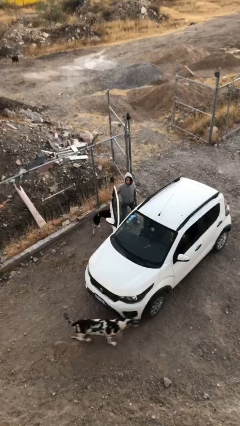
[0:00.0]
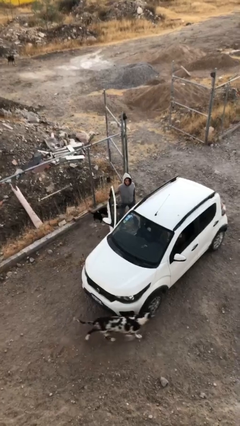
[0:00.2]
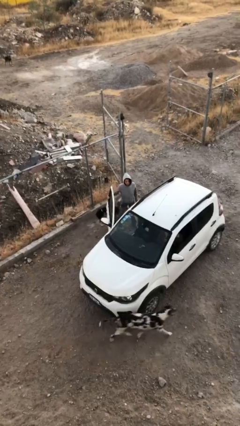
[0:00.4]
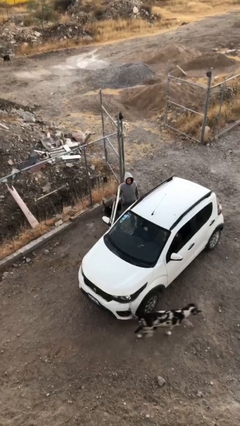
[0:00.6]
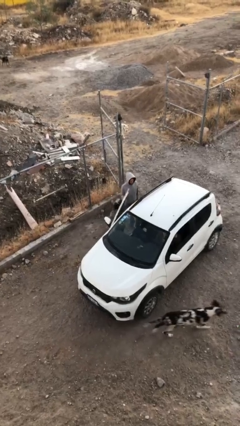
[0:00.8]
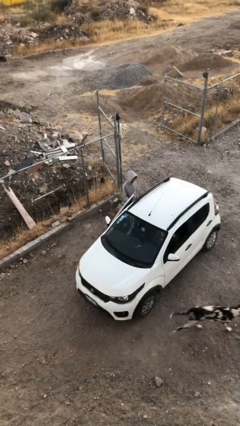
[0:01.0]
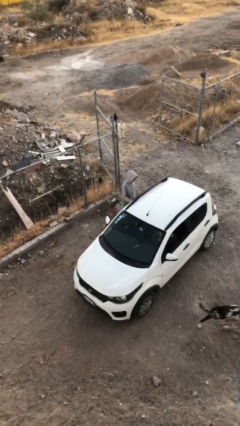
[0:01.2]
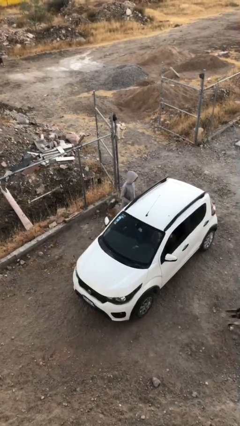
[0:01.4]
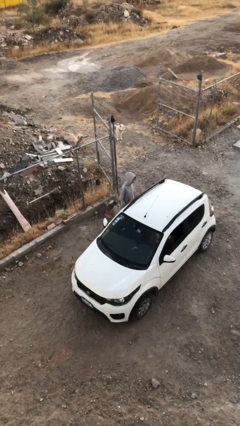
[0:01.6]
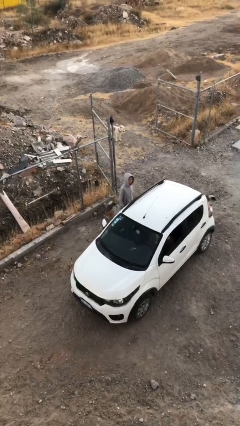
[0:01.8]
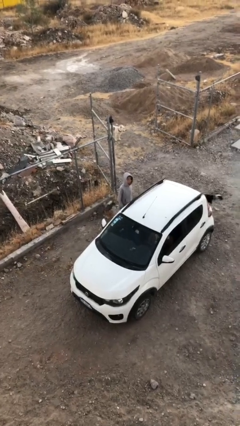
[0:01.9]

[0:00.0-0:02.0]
person closes car door

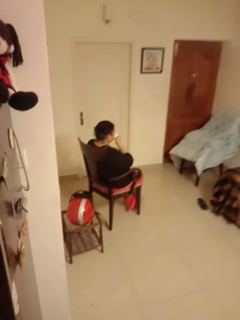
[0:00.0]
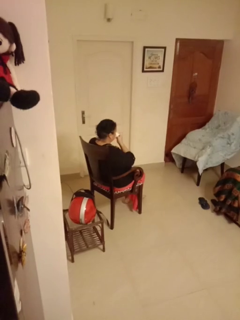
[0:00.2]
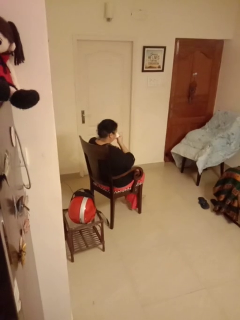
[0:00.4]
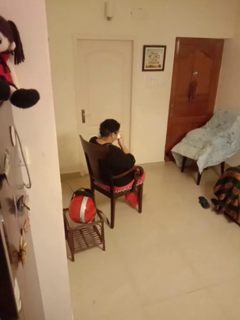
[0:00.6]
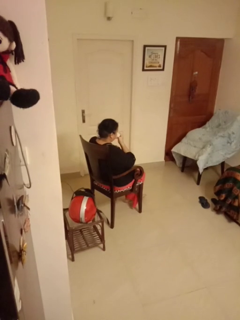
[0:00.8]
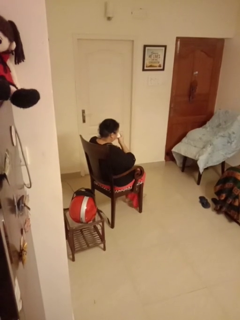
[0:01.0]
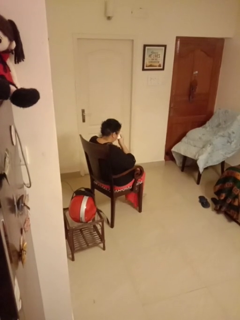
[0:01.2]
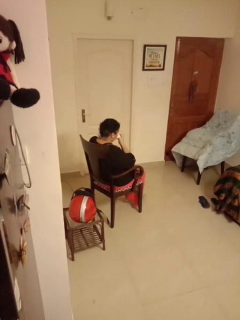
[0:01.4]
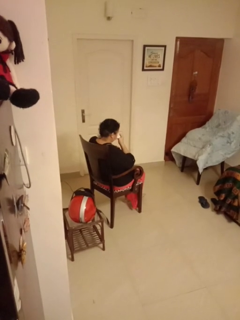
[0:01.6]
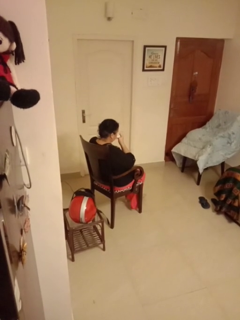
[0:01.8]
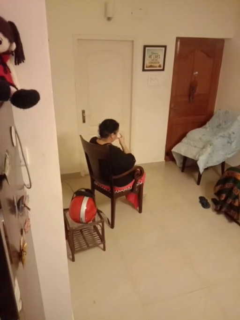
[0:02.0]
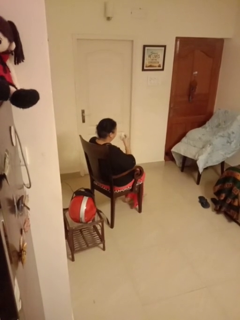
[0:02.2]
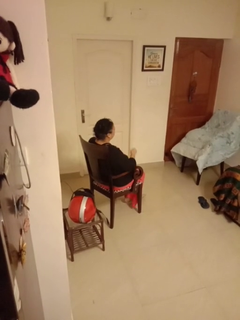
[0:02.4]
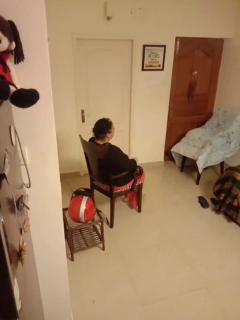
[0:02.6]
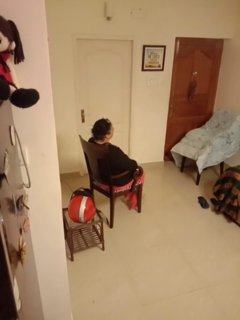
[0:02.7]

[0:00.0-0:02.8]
person blows nose

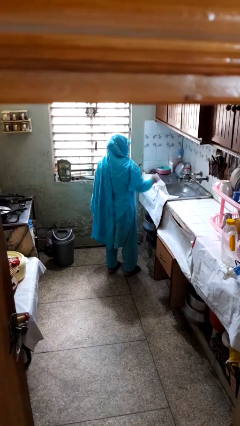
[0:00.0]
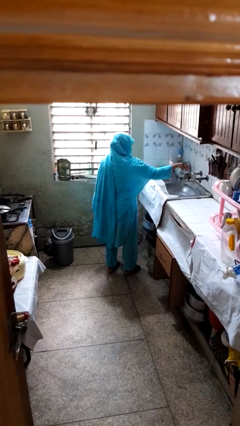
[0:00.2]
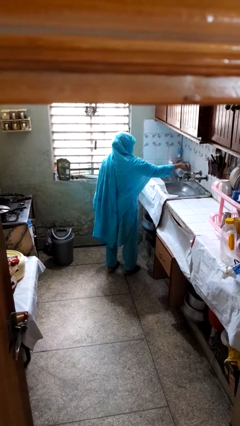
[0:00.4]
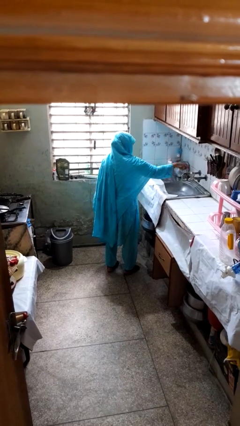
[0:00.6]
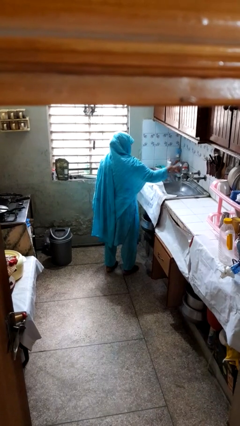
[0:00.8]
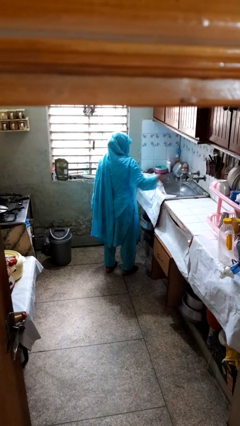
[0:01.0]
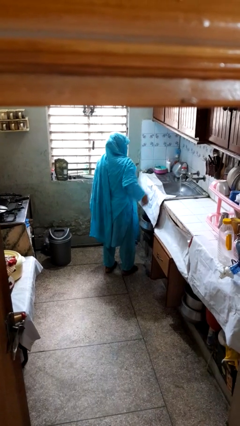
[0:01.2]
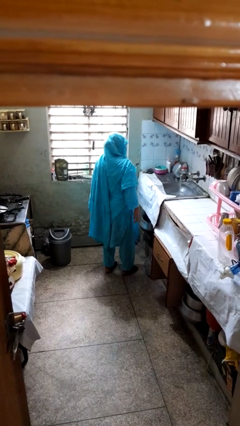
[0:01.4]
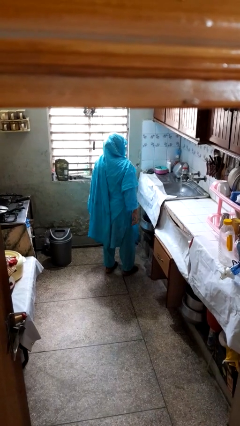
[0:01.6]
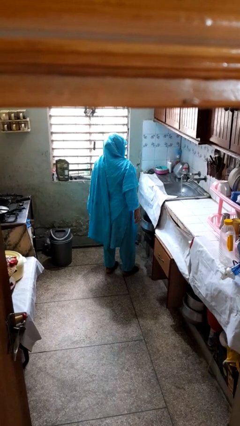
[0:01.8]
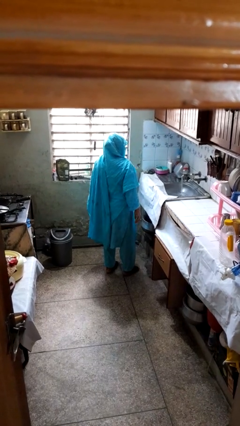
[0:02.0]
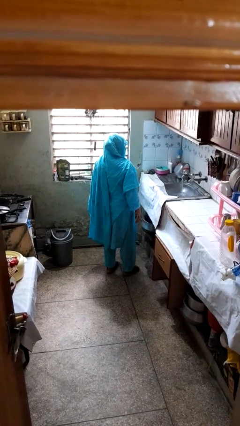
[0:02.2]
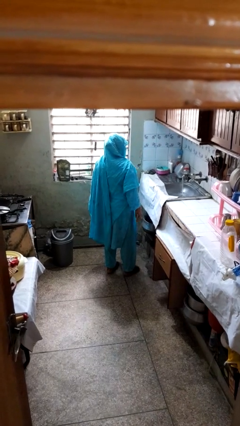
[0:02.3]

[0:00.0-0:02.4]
person turns on faucet

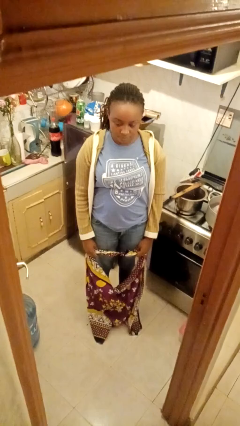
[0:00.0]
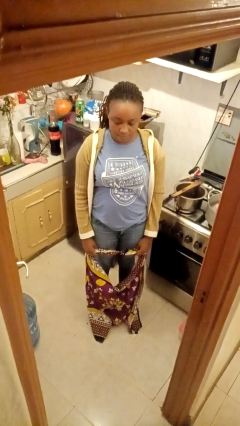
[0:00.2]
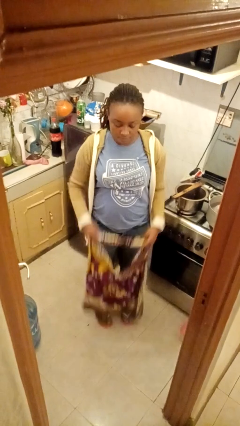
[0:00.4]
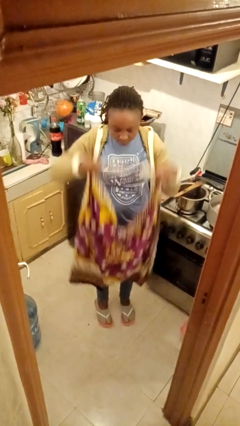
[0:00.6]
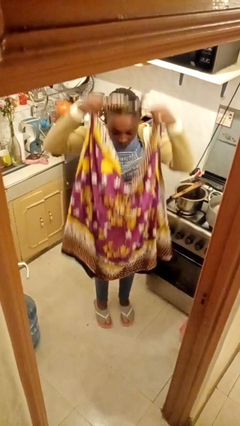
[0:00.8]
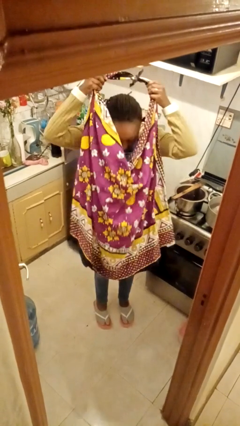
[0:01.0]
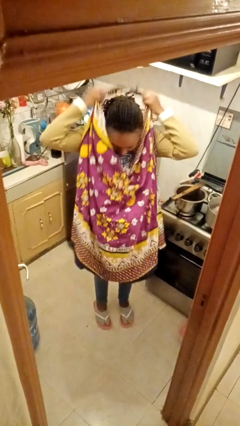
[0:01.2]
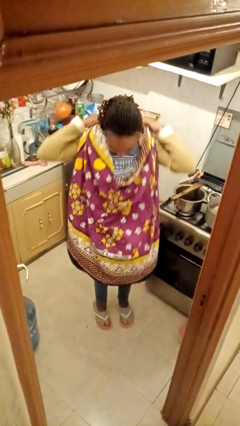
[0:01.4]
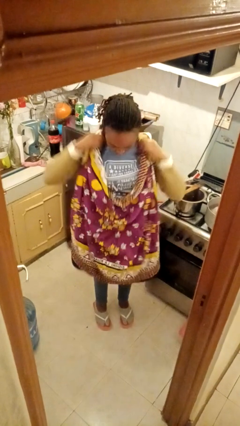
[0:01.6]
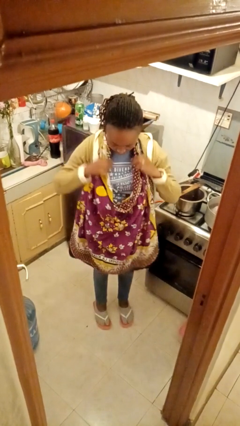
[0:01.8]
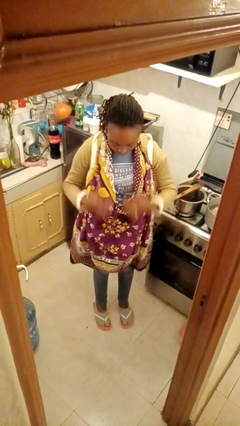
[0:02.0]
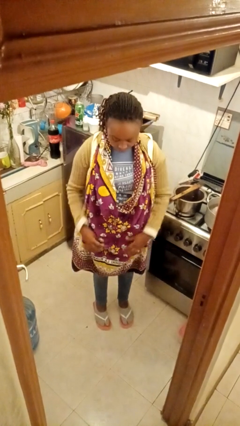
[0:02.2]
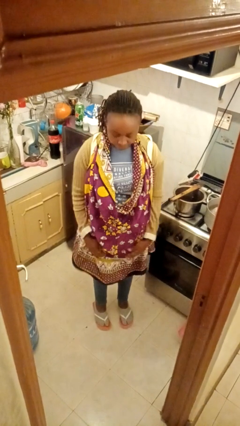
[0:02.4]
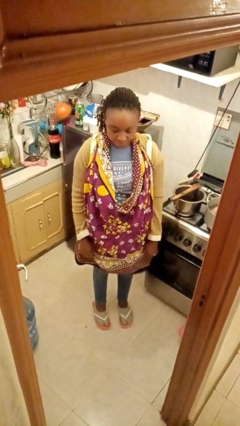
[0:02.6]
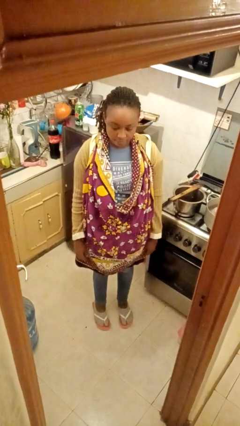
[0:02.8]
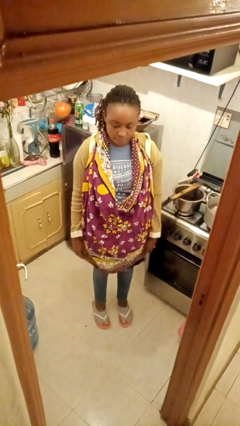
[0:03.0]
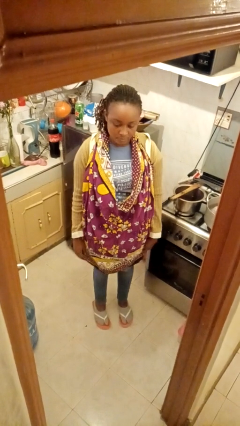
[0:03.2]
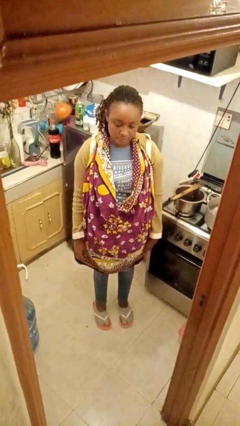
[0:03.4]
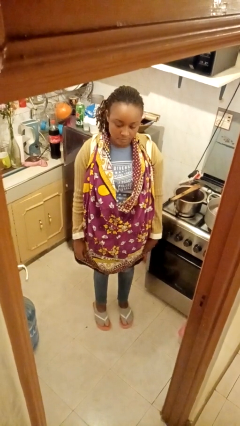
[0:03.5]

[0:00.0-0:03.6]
person puts on apron

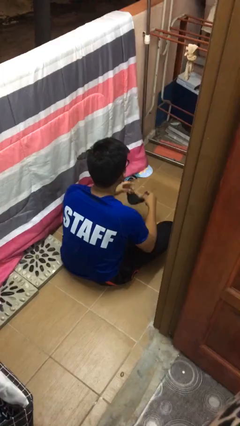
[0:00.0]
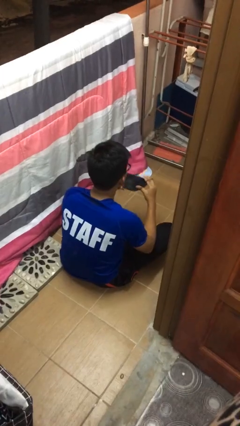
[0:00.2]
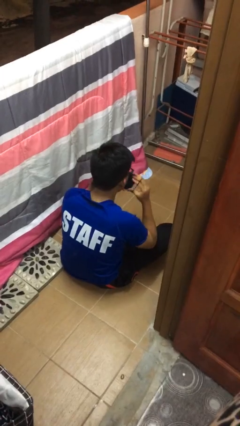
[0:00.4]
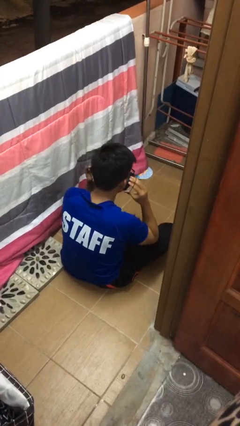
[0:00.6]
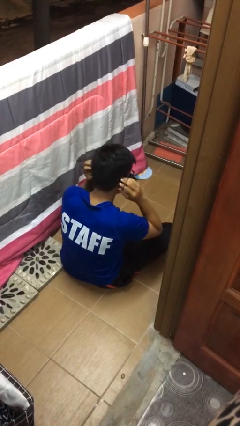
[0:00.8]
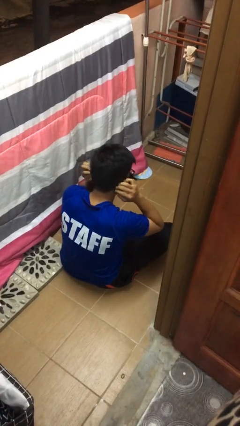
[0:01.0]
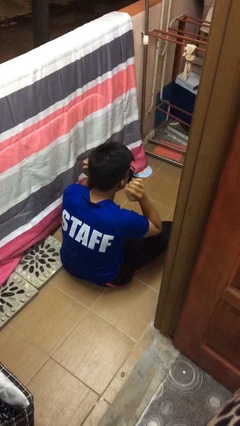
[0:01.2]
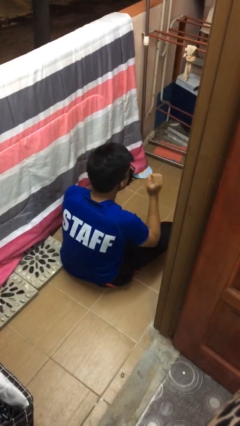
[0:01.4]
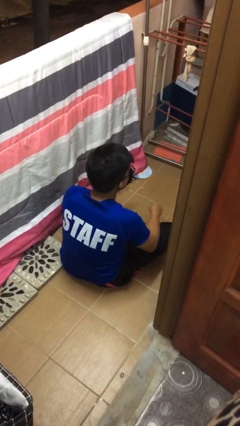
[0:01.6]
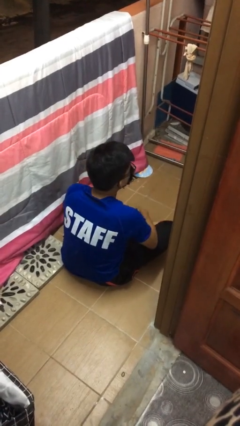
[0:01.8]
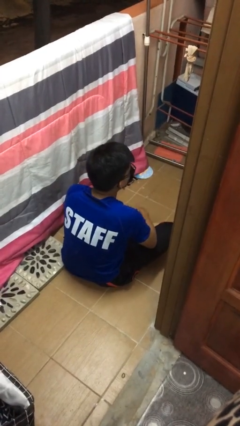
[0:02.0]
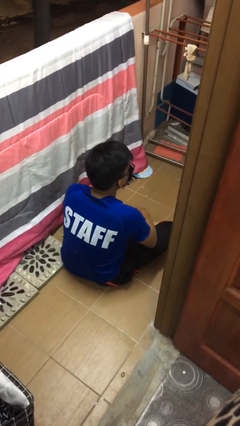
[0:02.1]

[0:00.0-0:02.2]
person puts on facemask

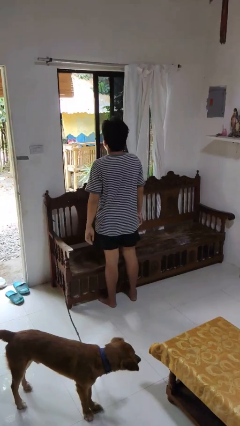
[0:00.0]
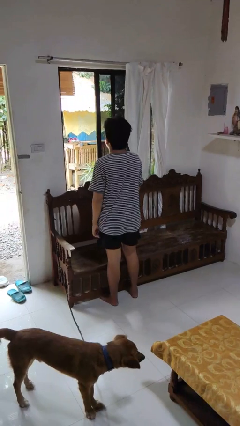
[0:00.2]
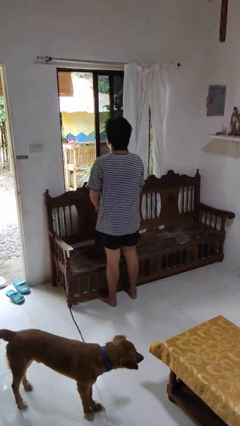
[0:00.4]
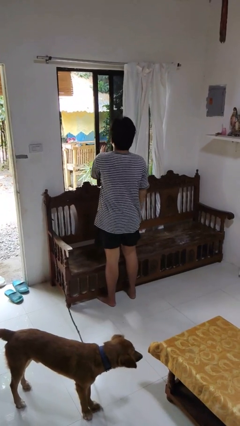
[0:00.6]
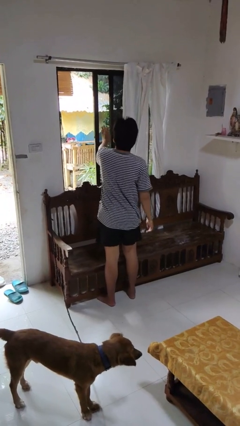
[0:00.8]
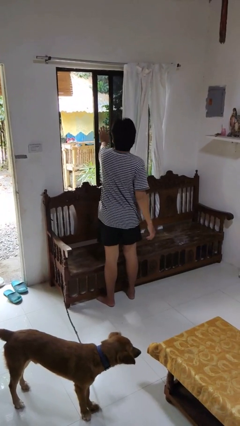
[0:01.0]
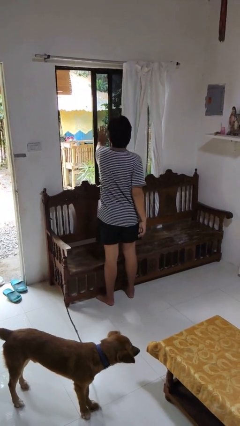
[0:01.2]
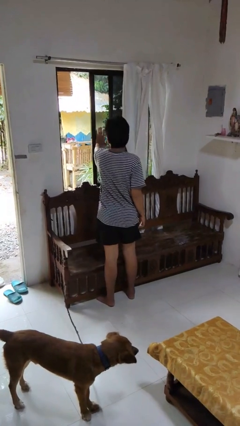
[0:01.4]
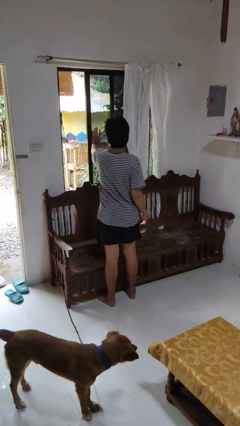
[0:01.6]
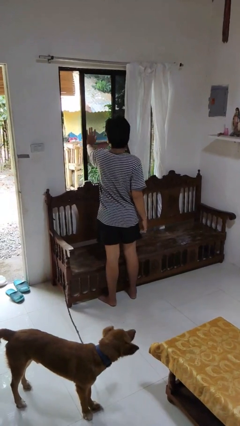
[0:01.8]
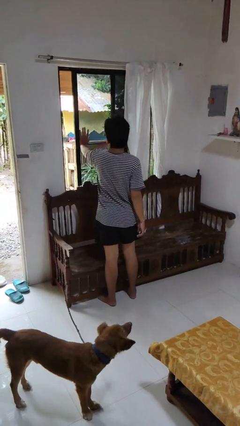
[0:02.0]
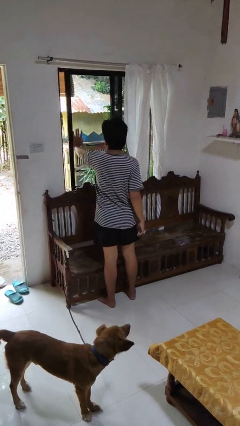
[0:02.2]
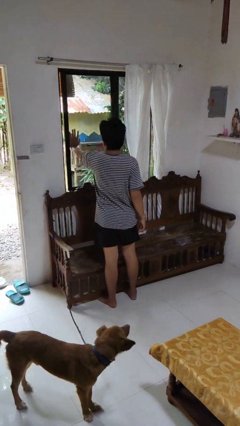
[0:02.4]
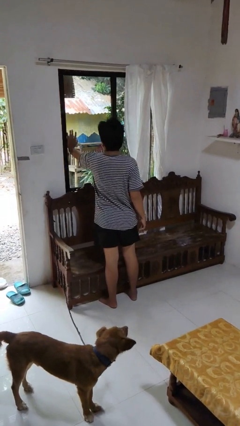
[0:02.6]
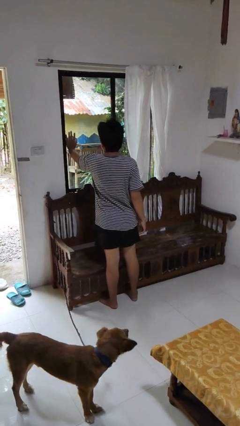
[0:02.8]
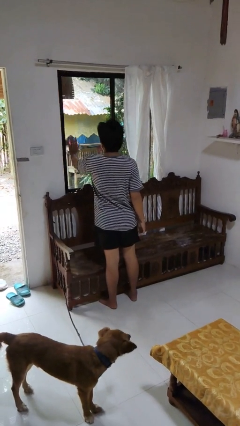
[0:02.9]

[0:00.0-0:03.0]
person closes home window

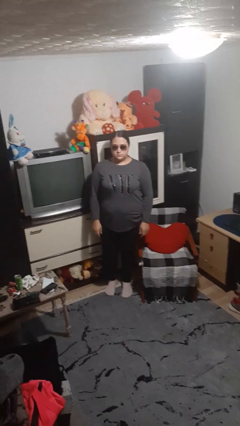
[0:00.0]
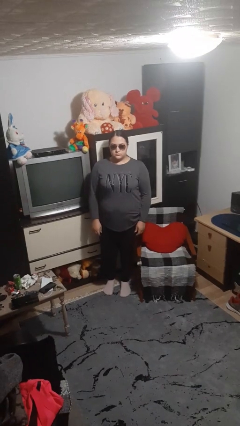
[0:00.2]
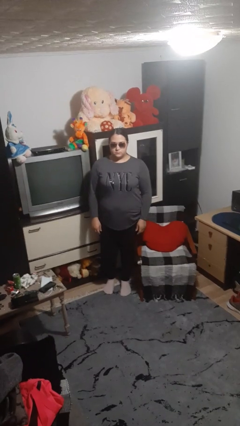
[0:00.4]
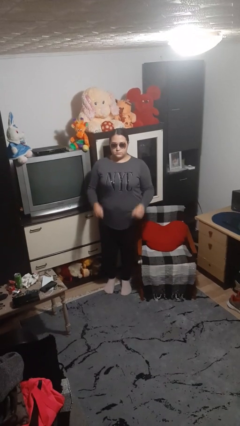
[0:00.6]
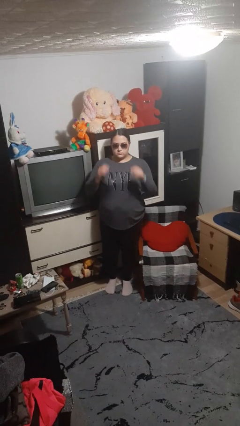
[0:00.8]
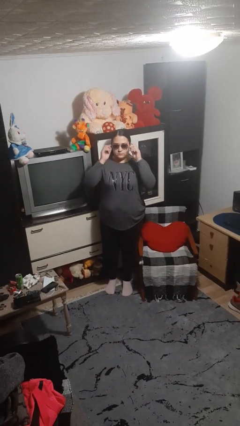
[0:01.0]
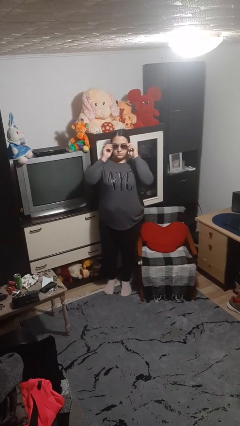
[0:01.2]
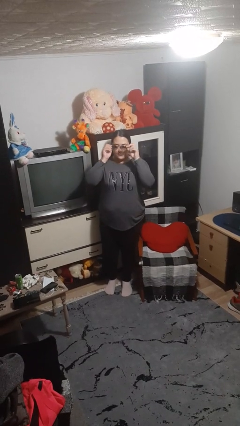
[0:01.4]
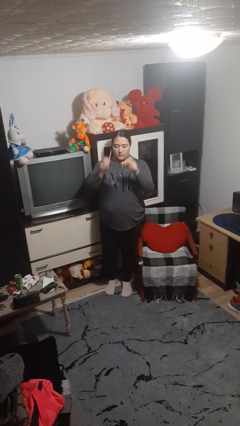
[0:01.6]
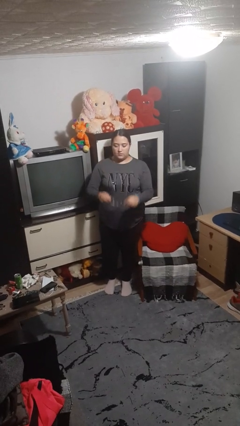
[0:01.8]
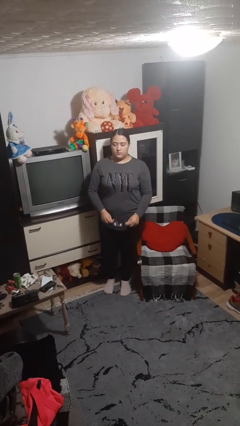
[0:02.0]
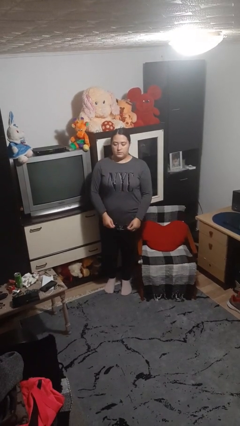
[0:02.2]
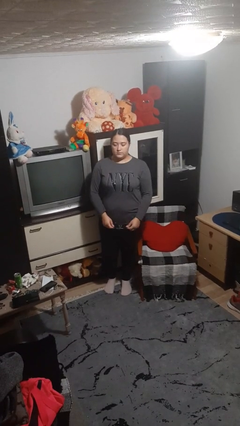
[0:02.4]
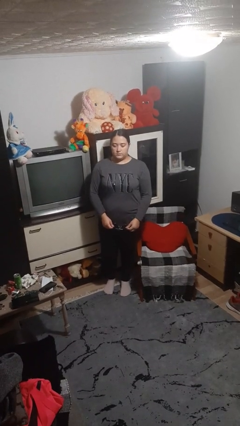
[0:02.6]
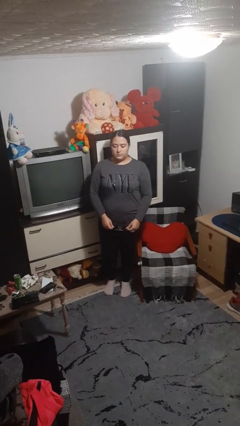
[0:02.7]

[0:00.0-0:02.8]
person takes off sunglasses
